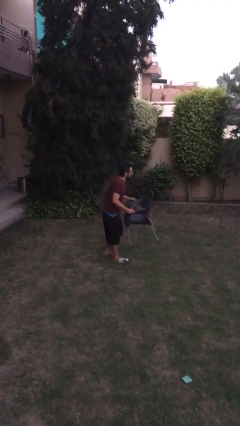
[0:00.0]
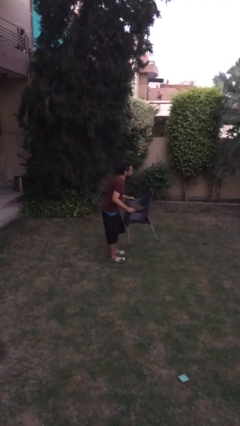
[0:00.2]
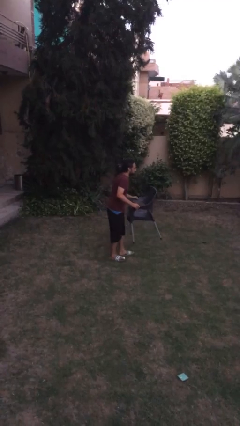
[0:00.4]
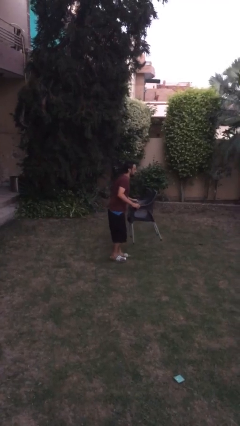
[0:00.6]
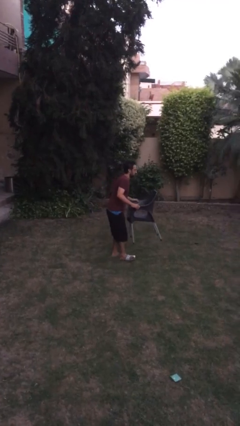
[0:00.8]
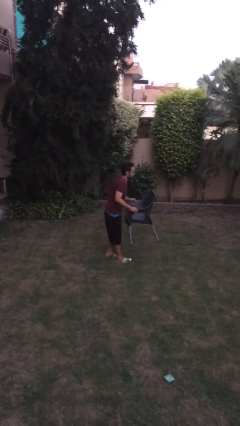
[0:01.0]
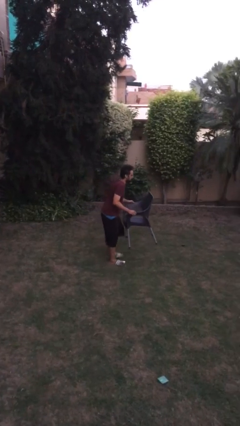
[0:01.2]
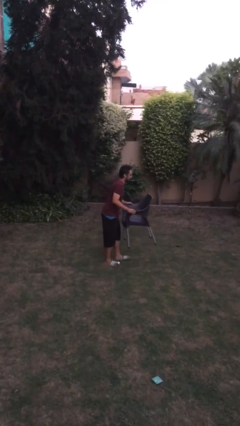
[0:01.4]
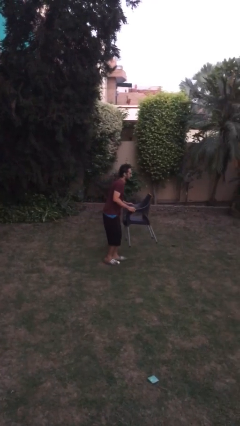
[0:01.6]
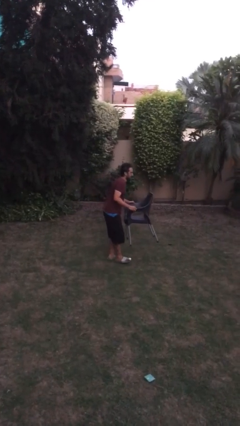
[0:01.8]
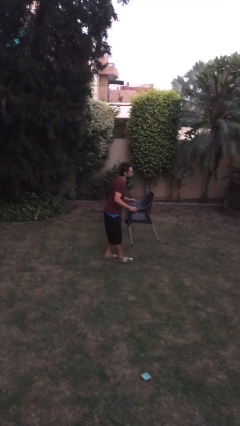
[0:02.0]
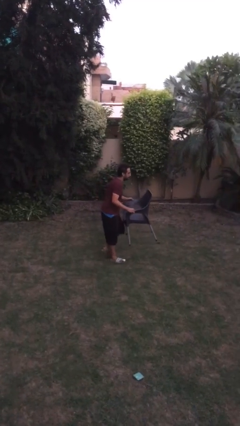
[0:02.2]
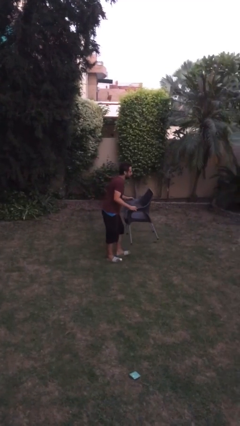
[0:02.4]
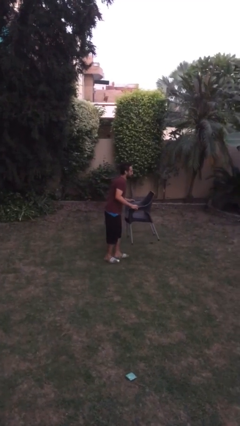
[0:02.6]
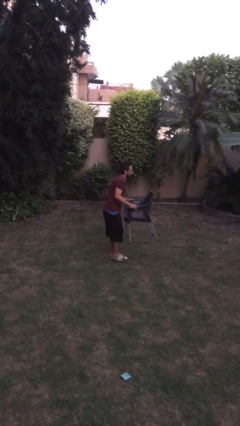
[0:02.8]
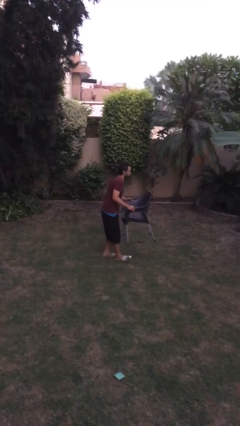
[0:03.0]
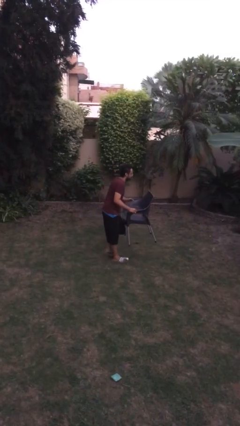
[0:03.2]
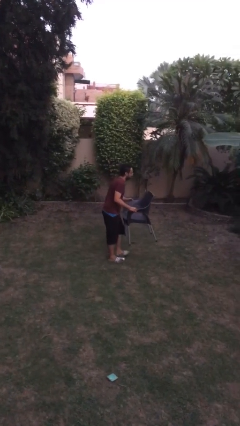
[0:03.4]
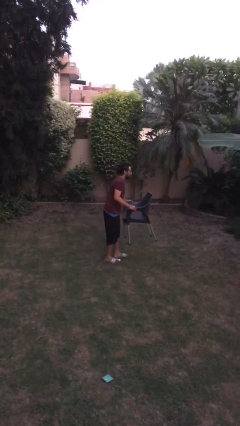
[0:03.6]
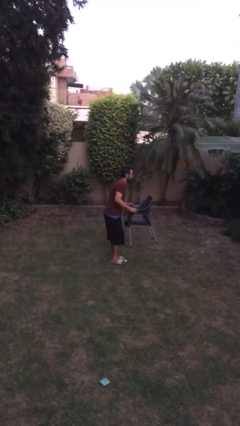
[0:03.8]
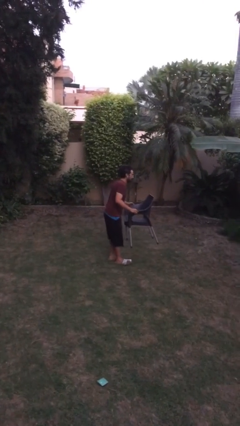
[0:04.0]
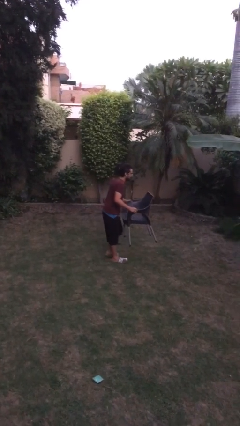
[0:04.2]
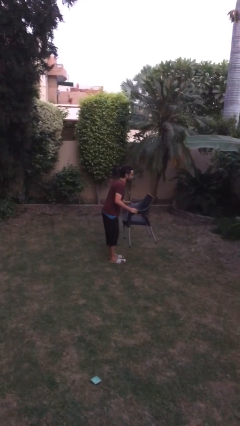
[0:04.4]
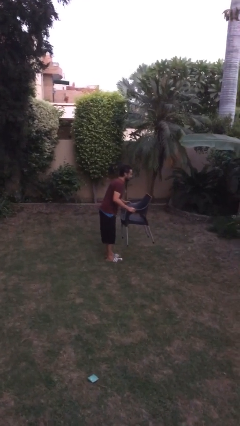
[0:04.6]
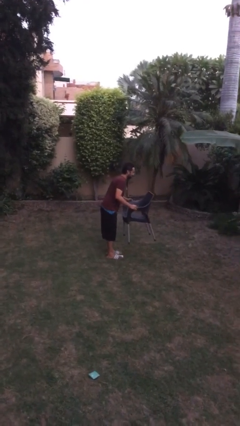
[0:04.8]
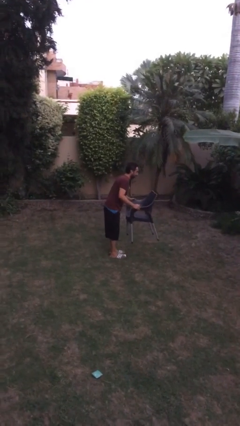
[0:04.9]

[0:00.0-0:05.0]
person carries heavy object

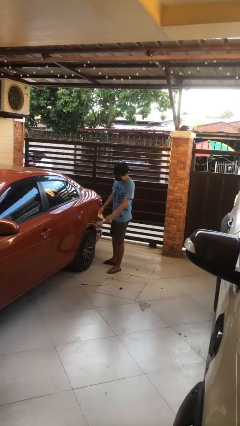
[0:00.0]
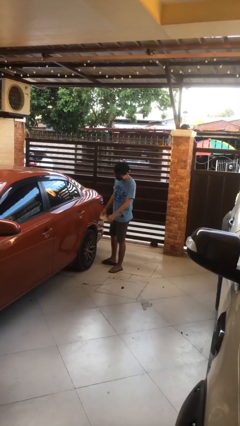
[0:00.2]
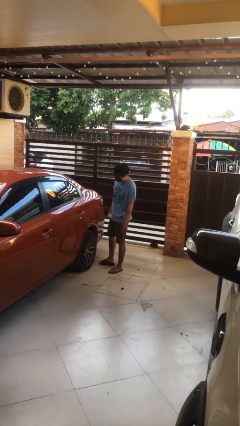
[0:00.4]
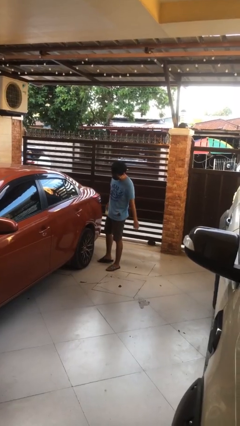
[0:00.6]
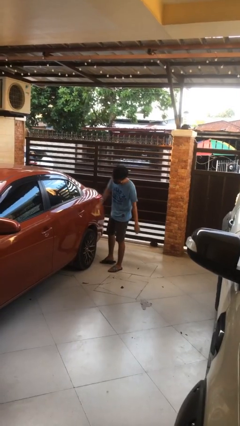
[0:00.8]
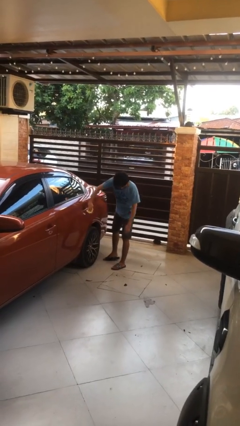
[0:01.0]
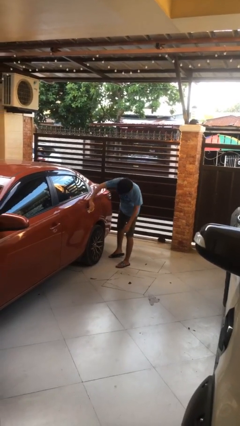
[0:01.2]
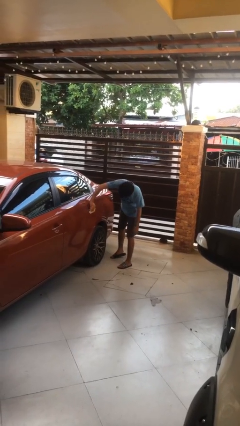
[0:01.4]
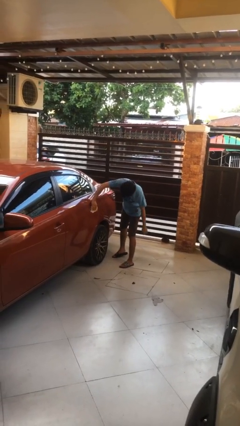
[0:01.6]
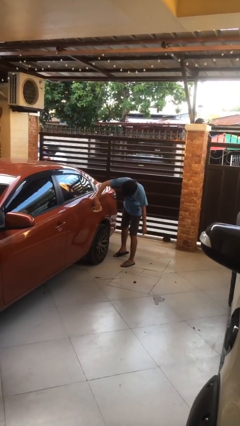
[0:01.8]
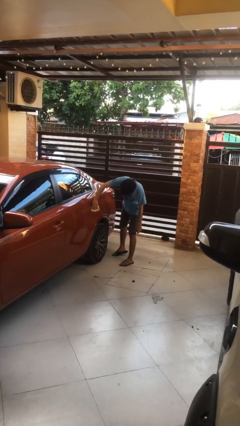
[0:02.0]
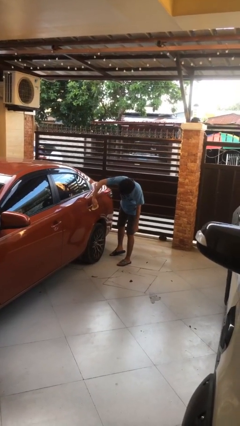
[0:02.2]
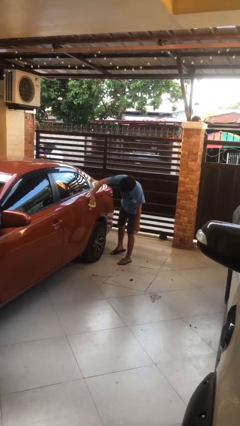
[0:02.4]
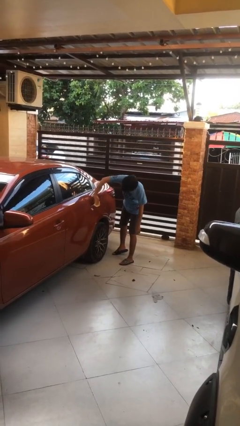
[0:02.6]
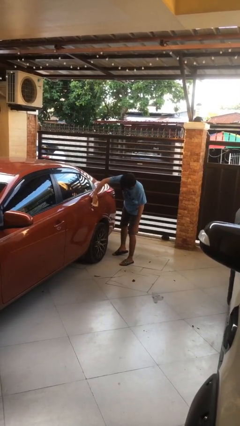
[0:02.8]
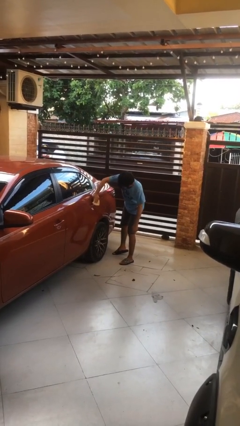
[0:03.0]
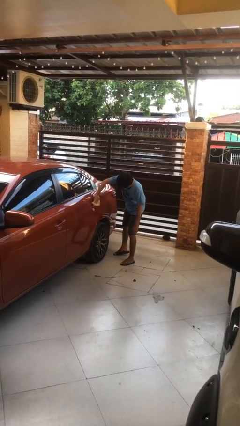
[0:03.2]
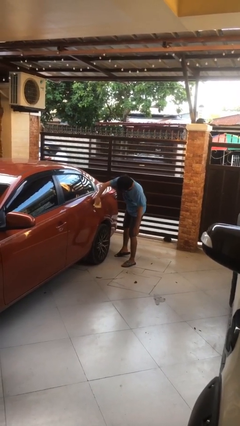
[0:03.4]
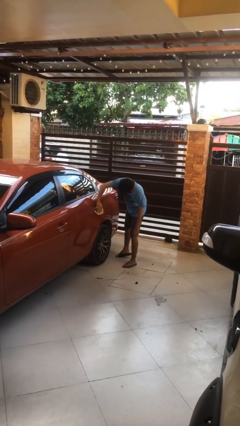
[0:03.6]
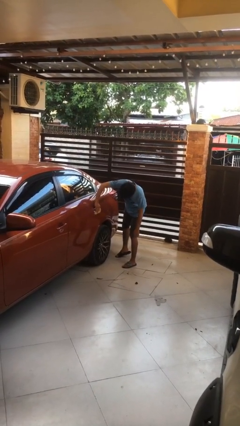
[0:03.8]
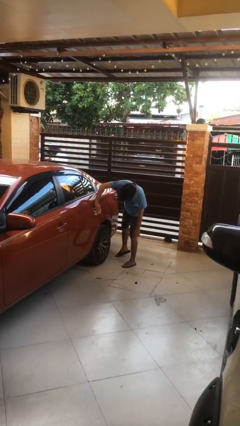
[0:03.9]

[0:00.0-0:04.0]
person polishes car with rag

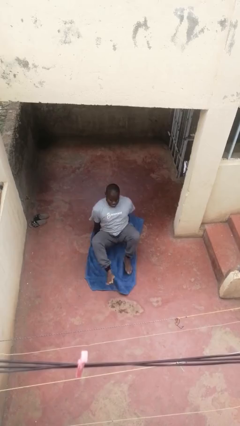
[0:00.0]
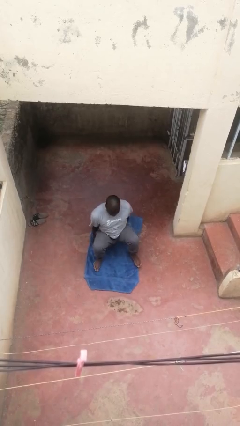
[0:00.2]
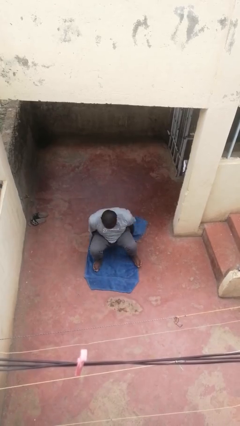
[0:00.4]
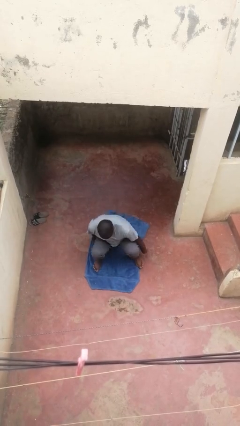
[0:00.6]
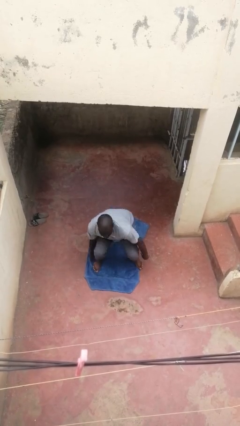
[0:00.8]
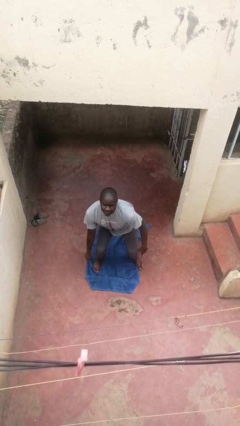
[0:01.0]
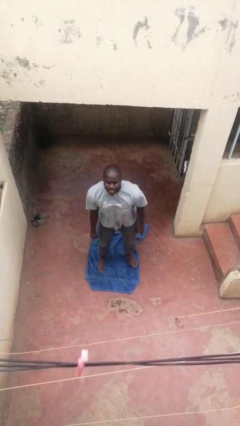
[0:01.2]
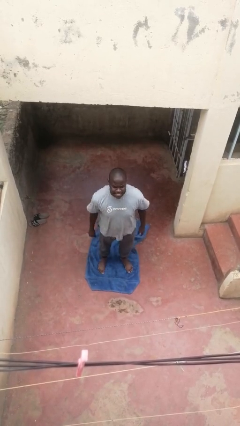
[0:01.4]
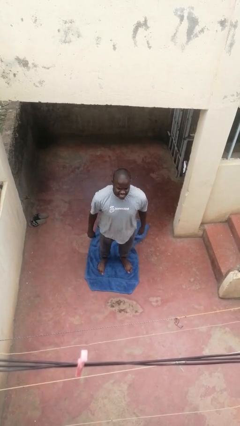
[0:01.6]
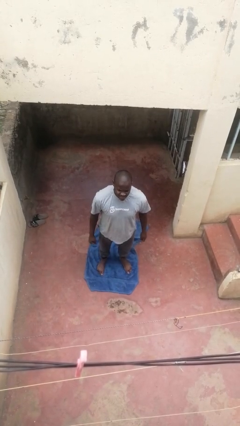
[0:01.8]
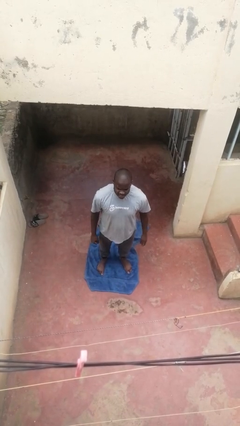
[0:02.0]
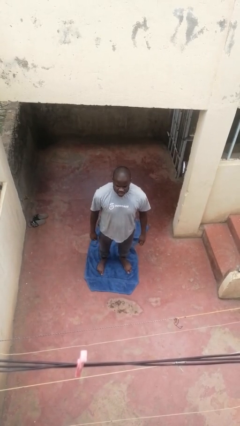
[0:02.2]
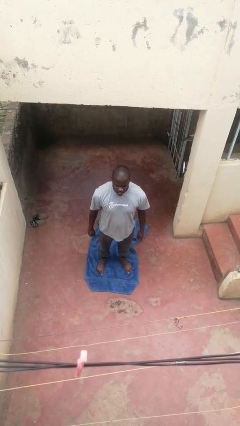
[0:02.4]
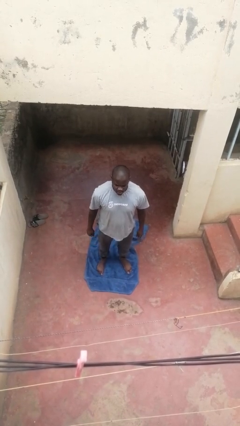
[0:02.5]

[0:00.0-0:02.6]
person stands up from floor

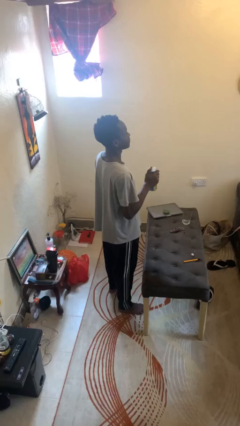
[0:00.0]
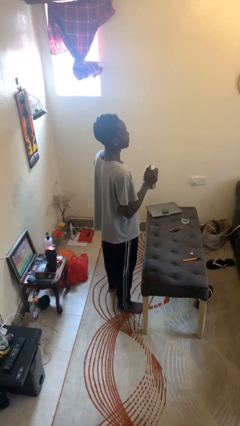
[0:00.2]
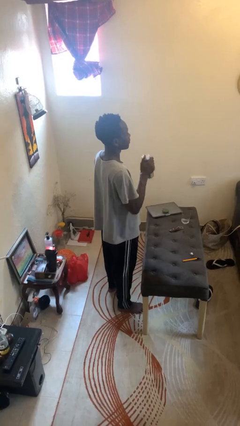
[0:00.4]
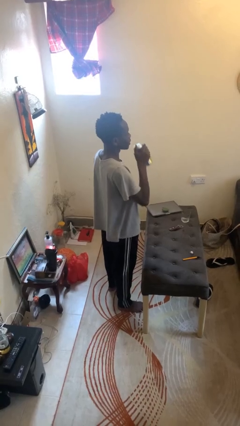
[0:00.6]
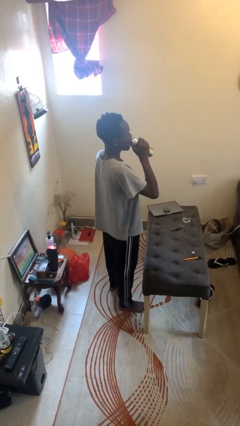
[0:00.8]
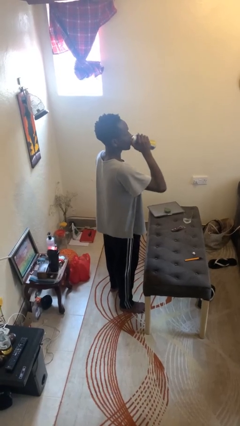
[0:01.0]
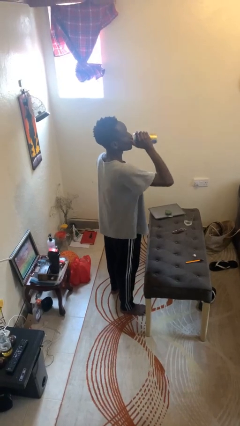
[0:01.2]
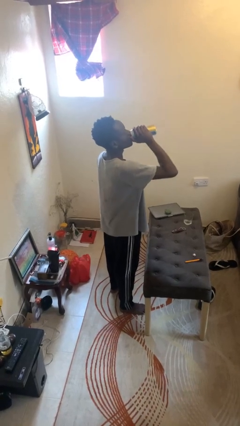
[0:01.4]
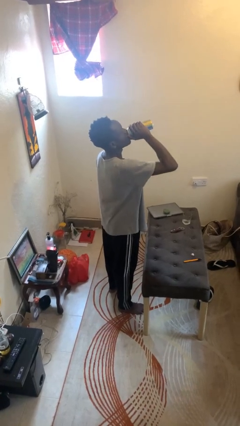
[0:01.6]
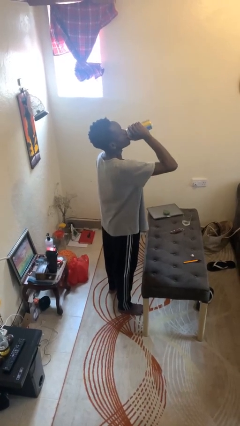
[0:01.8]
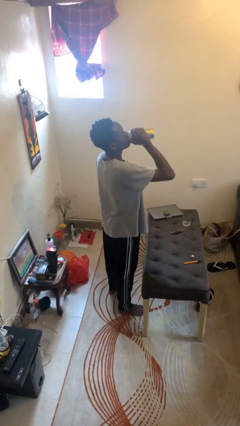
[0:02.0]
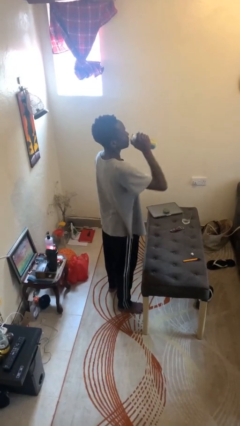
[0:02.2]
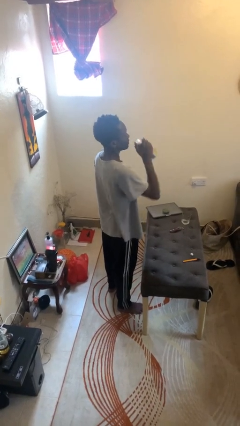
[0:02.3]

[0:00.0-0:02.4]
person drinks from beverage can

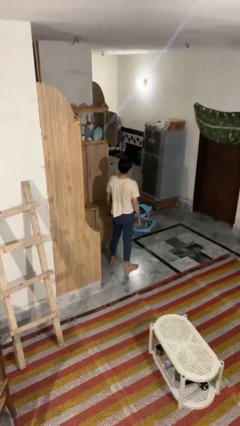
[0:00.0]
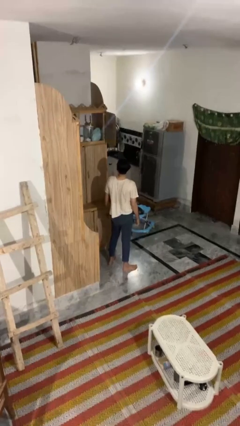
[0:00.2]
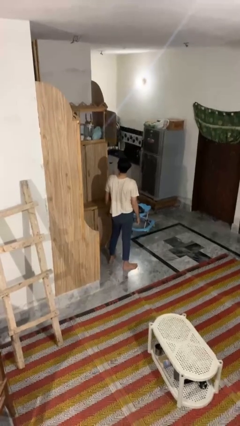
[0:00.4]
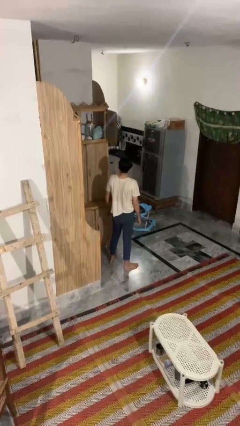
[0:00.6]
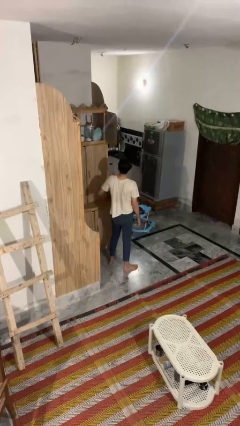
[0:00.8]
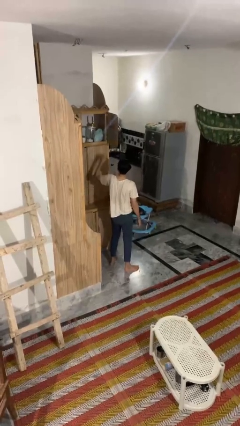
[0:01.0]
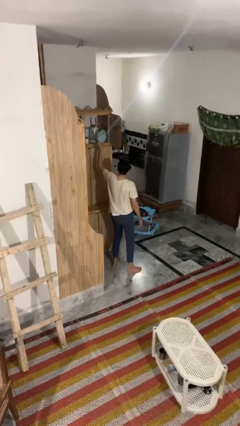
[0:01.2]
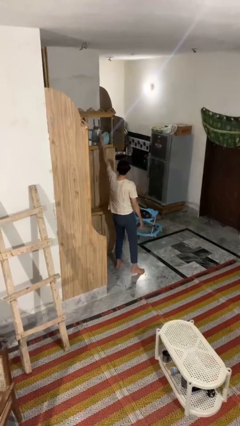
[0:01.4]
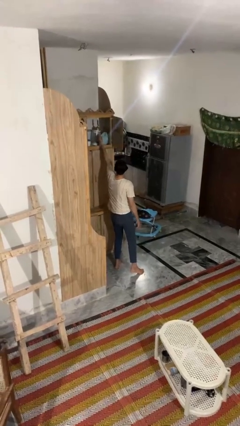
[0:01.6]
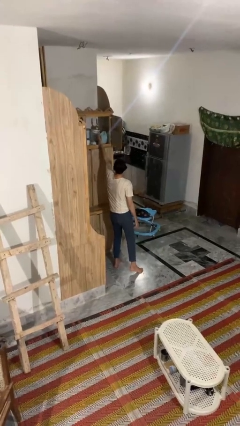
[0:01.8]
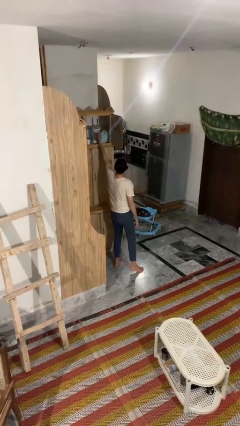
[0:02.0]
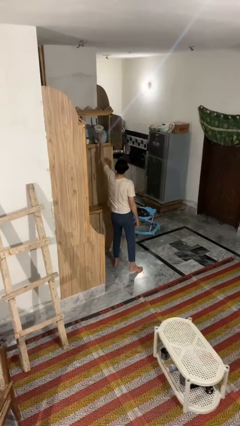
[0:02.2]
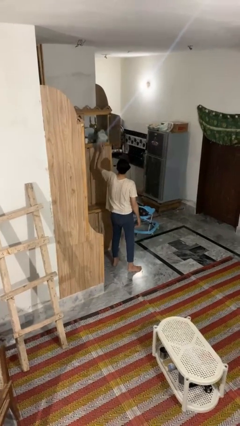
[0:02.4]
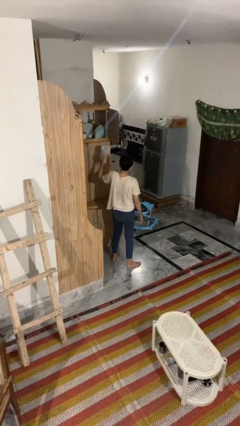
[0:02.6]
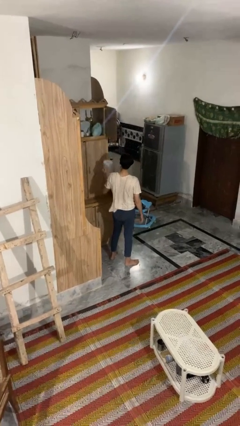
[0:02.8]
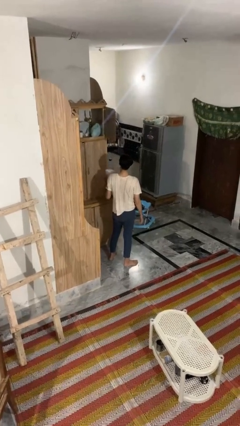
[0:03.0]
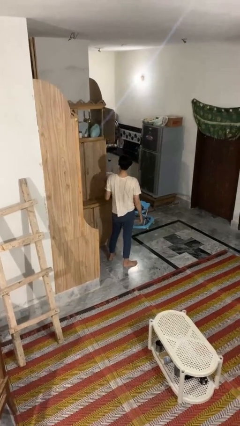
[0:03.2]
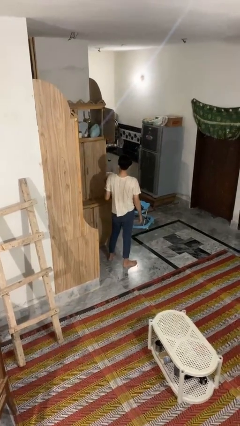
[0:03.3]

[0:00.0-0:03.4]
person picks up object from shelf

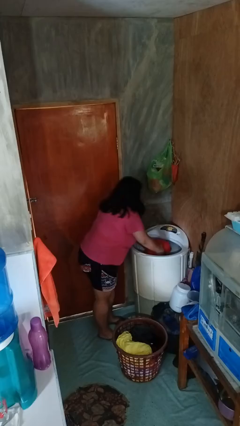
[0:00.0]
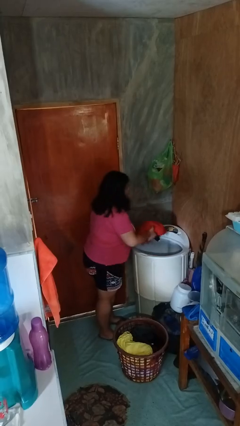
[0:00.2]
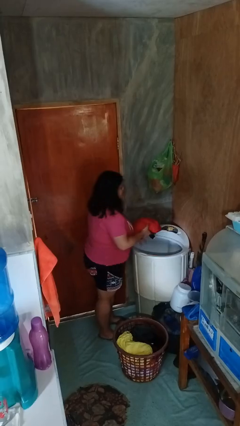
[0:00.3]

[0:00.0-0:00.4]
person unloads dryer
